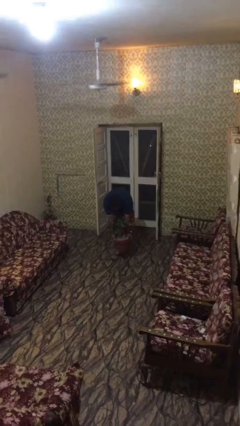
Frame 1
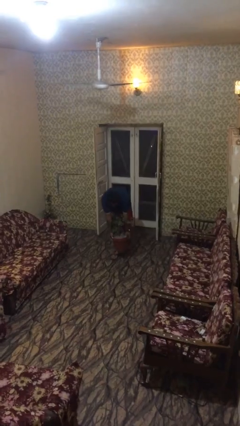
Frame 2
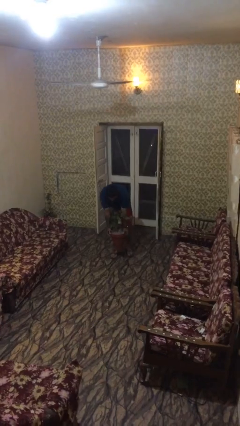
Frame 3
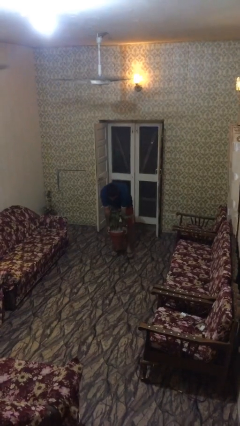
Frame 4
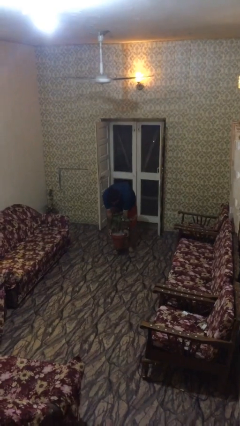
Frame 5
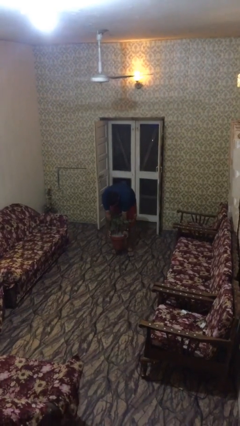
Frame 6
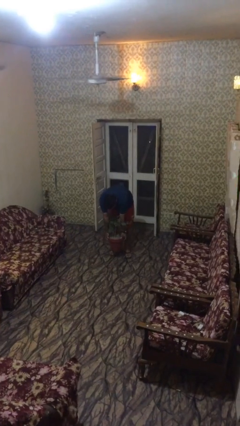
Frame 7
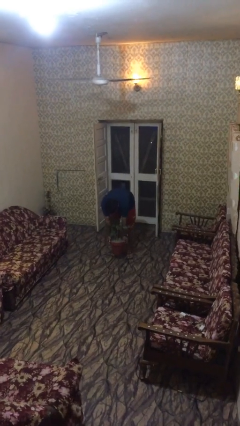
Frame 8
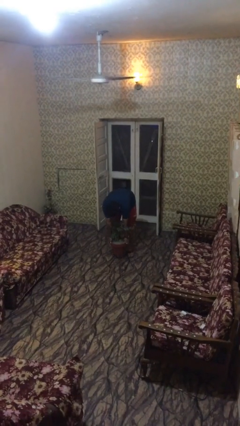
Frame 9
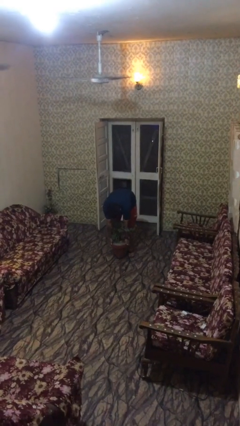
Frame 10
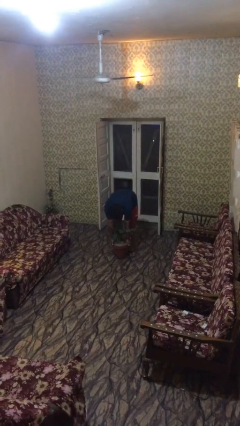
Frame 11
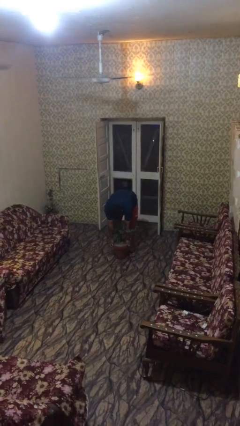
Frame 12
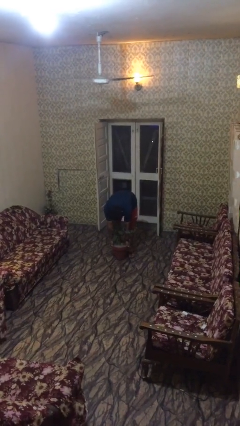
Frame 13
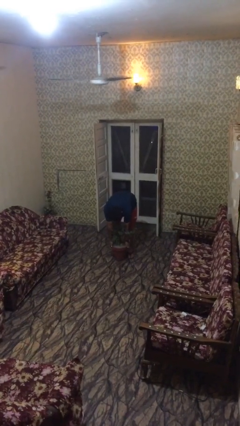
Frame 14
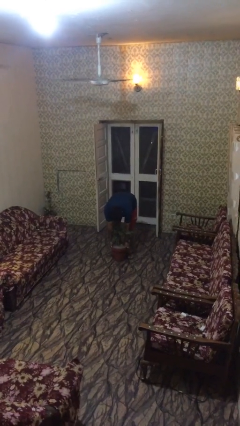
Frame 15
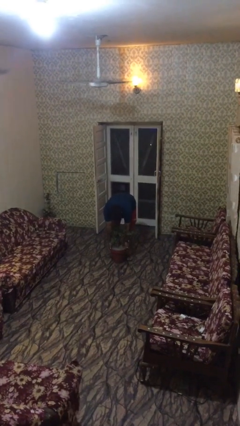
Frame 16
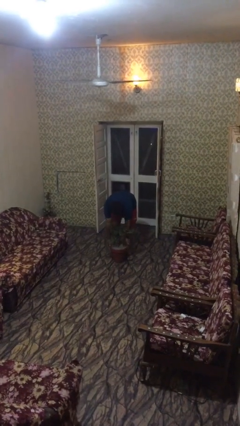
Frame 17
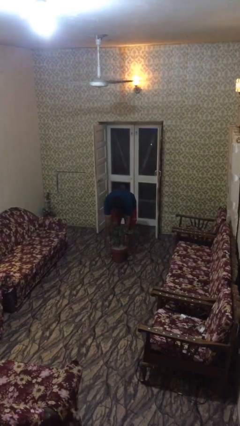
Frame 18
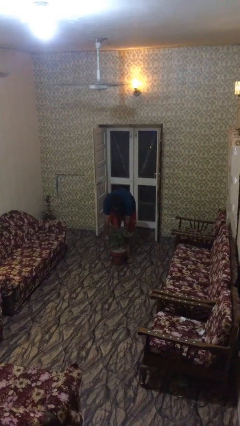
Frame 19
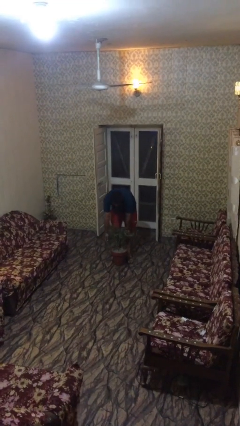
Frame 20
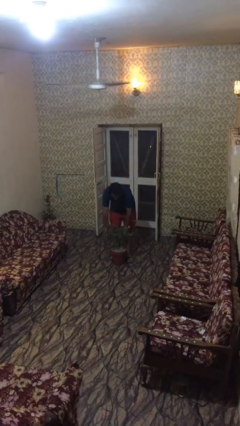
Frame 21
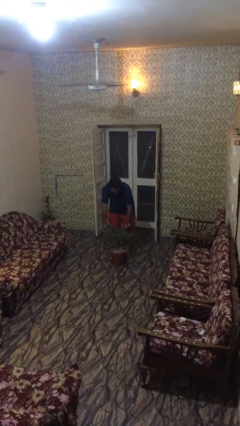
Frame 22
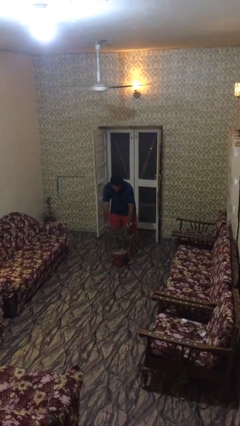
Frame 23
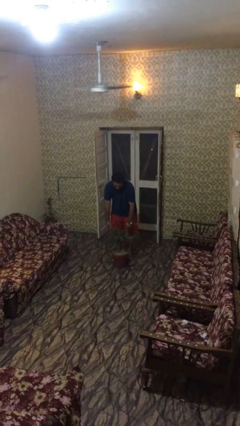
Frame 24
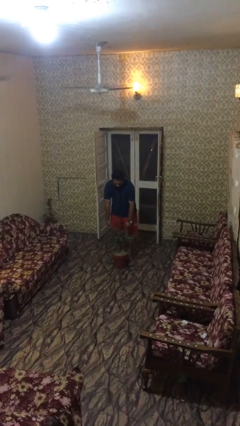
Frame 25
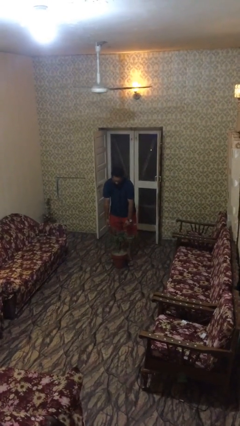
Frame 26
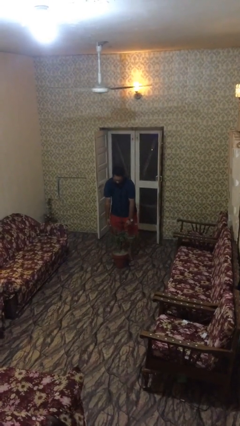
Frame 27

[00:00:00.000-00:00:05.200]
person puts down object on floor

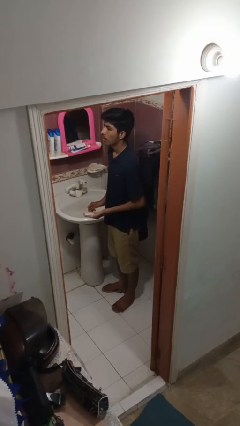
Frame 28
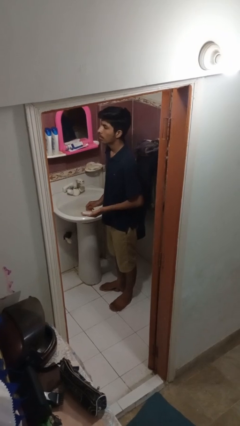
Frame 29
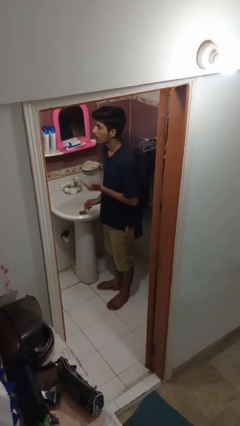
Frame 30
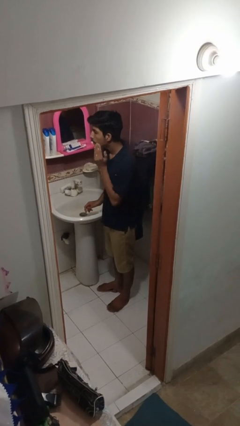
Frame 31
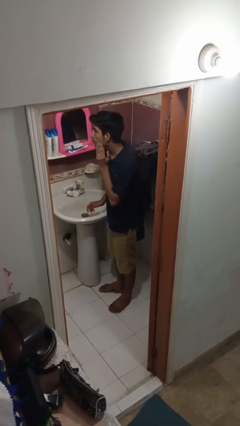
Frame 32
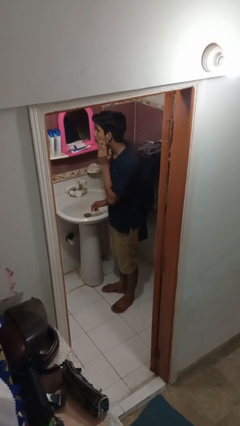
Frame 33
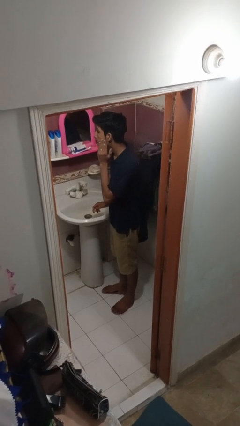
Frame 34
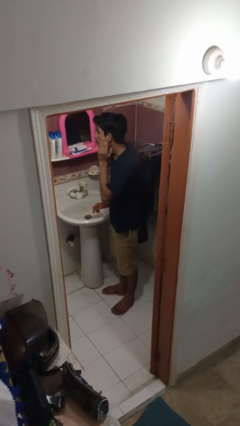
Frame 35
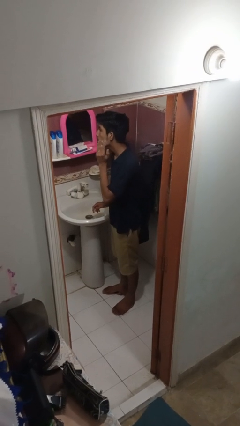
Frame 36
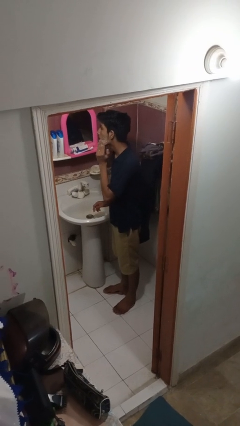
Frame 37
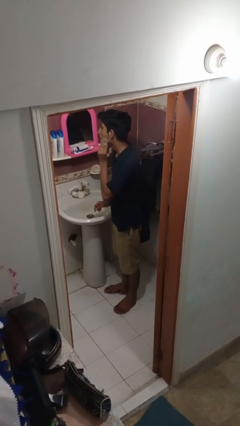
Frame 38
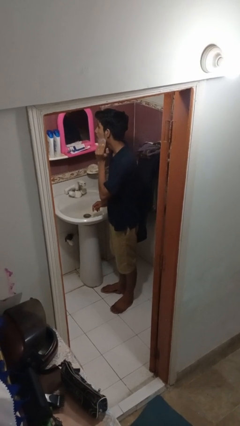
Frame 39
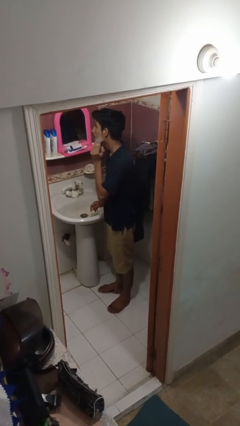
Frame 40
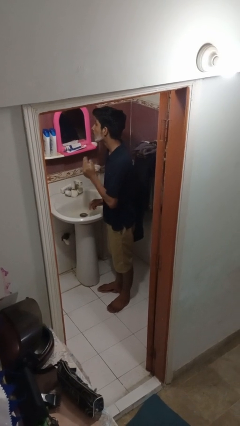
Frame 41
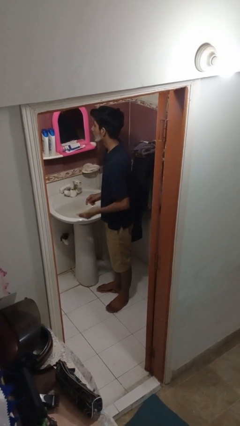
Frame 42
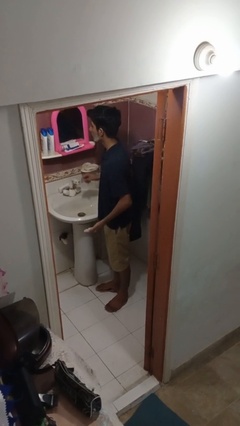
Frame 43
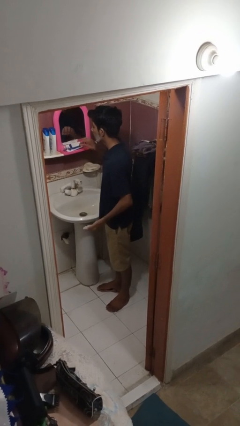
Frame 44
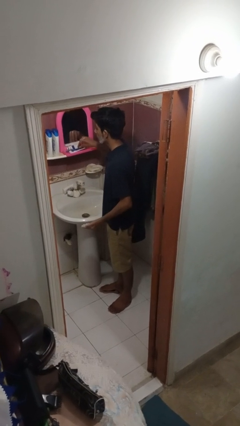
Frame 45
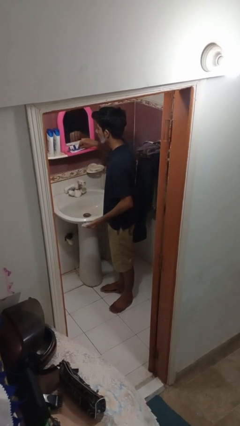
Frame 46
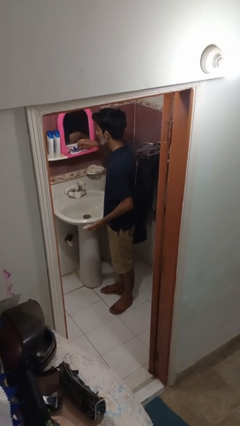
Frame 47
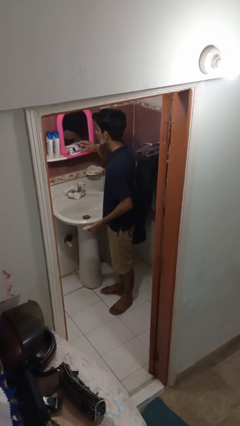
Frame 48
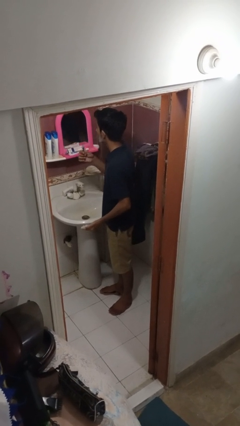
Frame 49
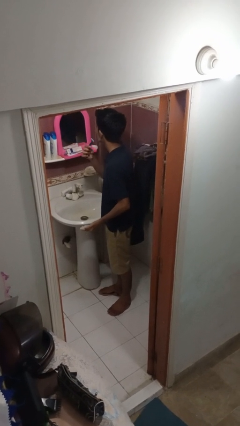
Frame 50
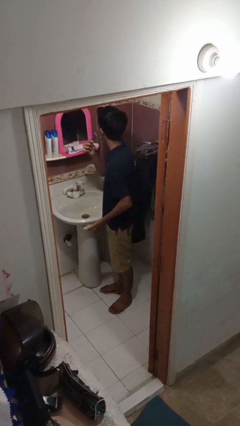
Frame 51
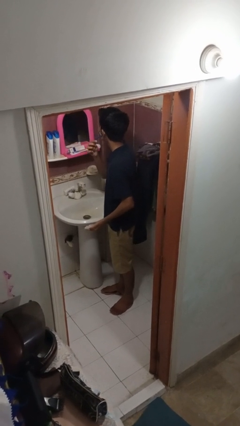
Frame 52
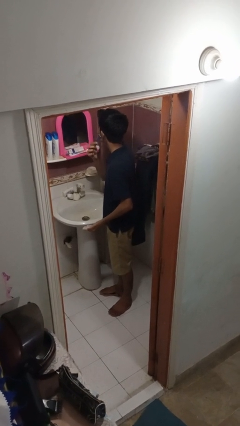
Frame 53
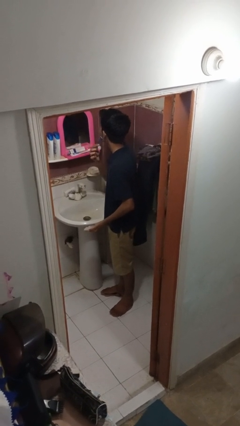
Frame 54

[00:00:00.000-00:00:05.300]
person applies shaving cream

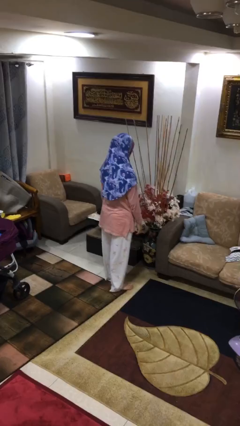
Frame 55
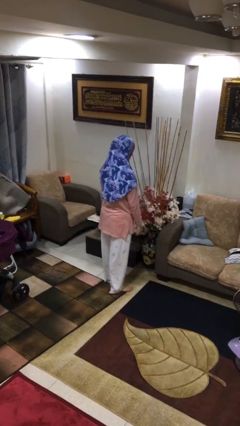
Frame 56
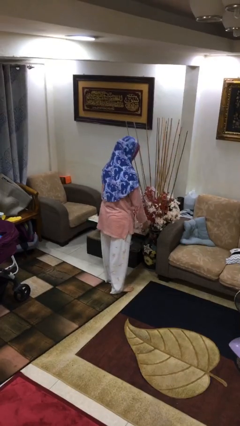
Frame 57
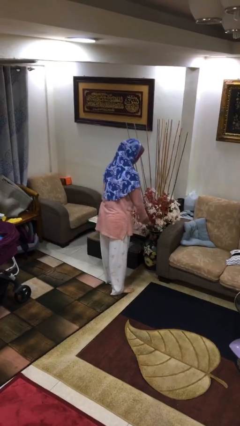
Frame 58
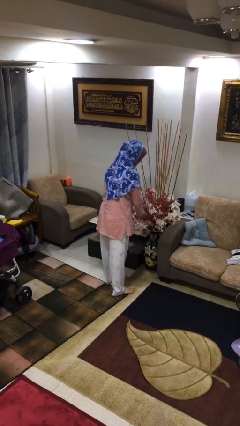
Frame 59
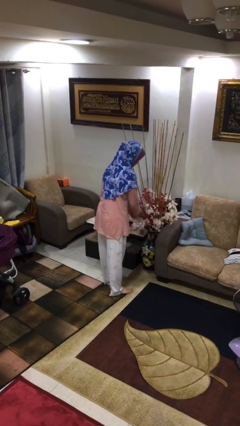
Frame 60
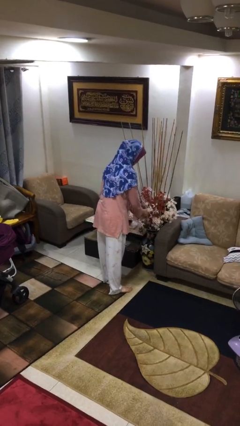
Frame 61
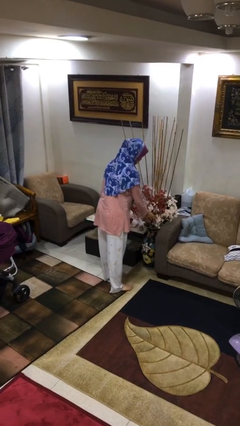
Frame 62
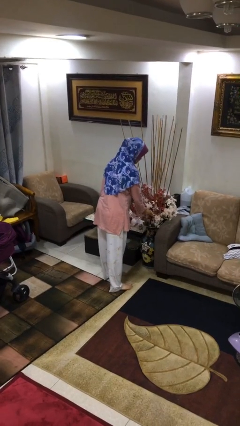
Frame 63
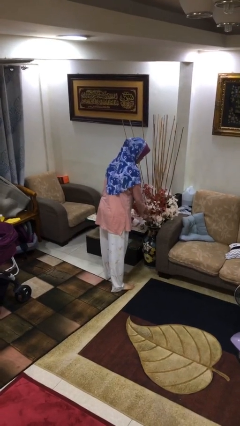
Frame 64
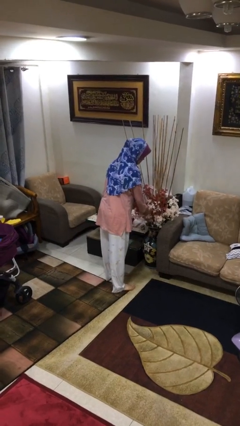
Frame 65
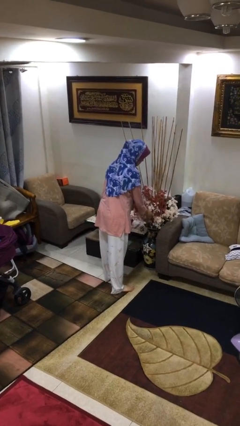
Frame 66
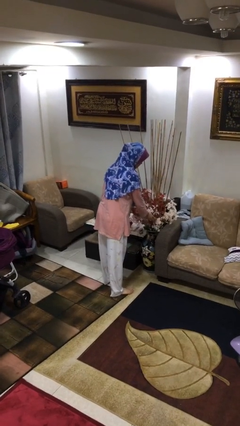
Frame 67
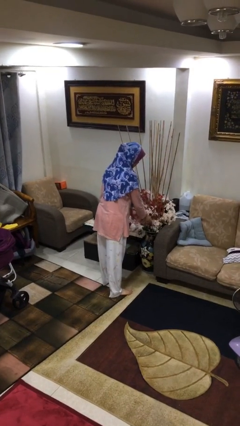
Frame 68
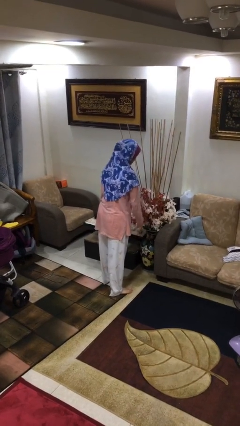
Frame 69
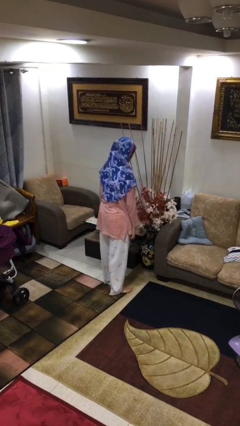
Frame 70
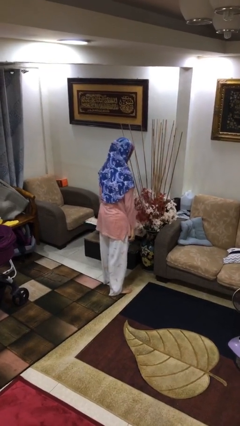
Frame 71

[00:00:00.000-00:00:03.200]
person arranges flowers in vase

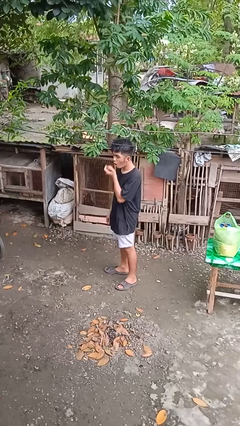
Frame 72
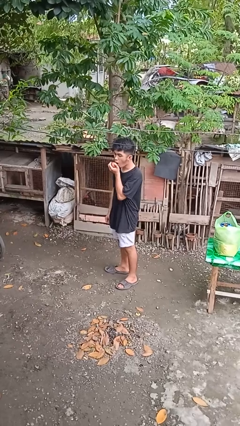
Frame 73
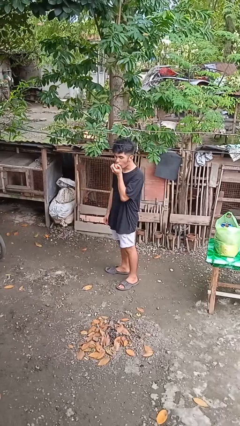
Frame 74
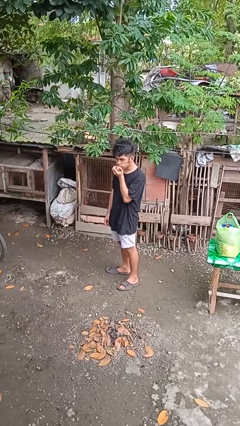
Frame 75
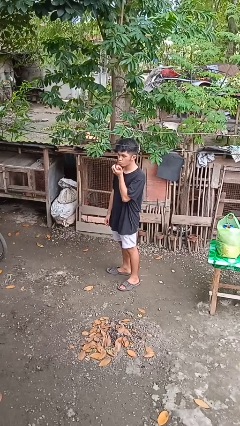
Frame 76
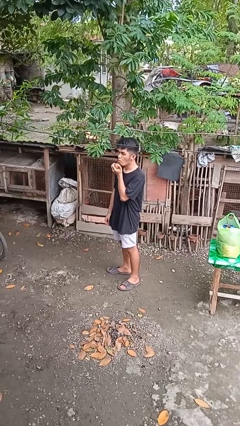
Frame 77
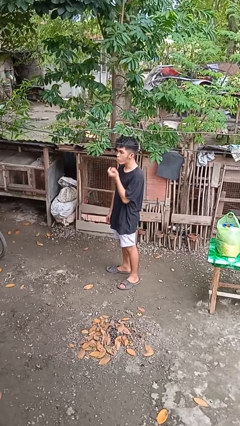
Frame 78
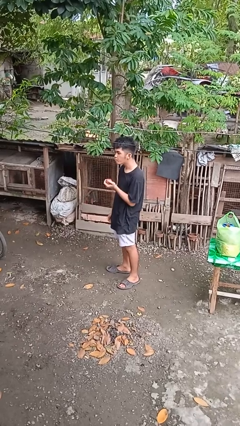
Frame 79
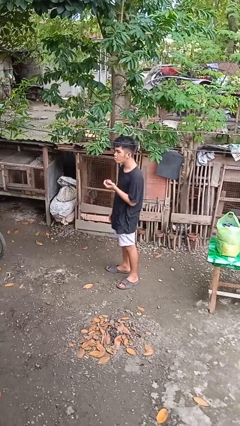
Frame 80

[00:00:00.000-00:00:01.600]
person eats apple

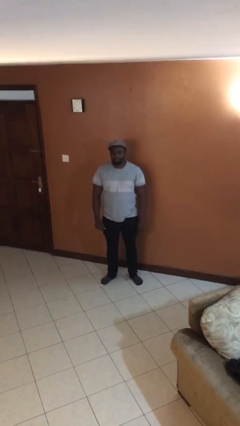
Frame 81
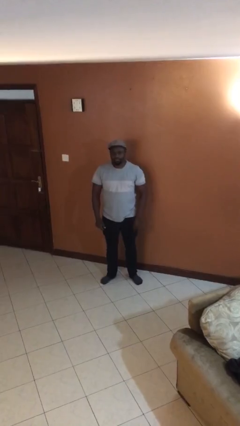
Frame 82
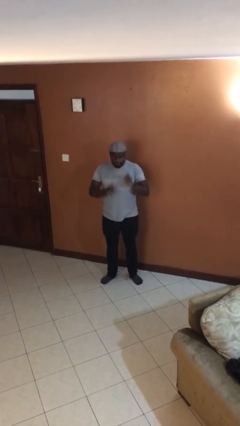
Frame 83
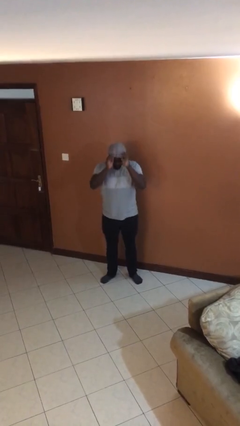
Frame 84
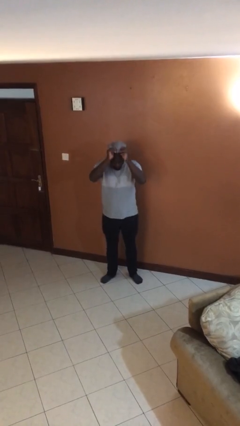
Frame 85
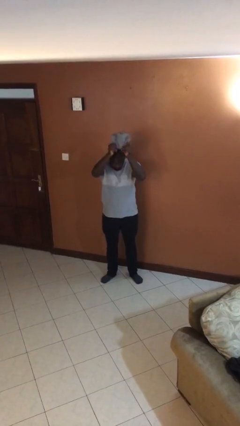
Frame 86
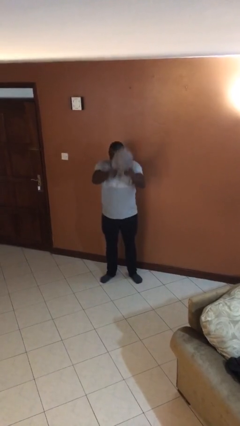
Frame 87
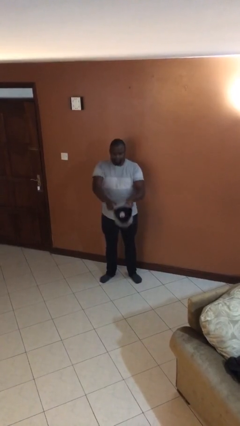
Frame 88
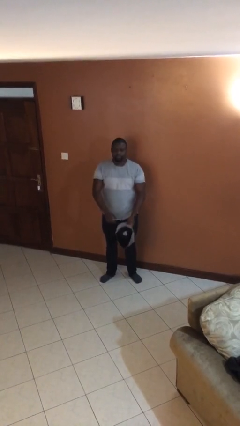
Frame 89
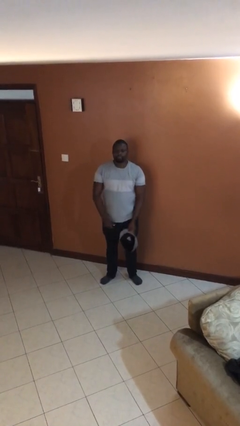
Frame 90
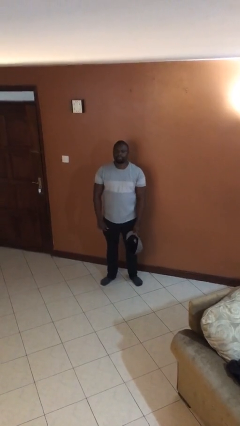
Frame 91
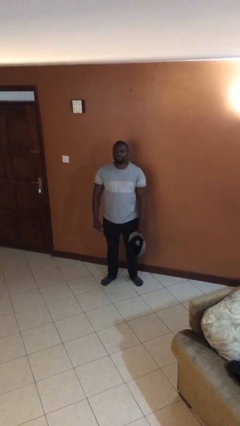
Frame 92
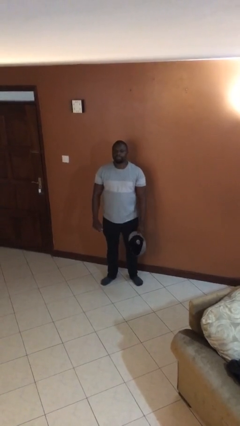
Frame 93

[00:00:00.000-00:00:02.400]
person takes off hat
